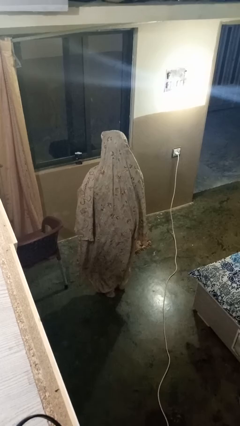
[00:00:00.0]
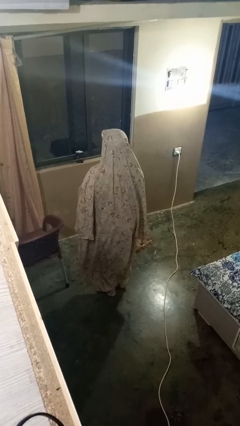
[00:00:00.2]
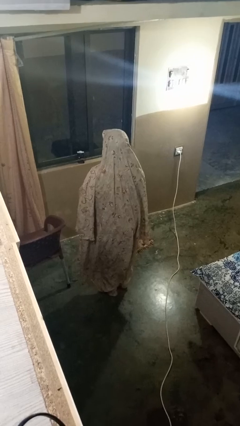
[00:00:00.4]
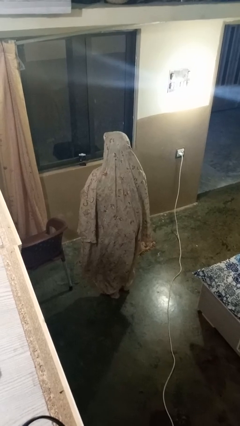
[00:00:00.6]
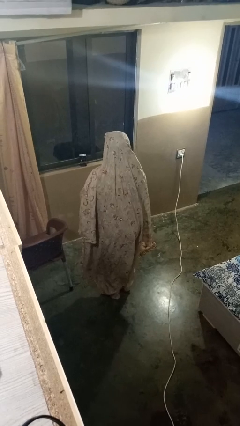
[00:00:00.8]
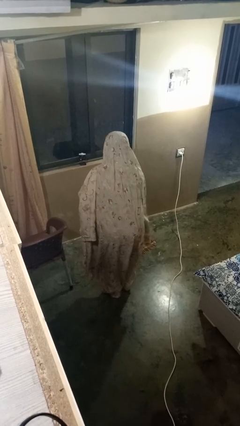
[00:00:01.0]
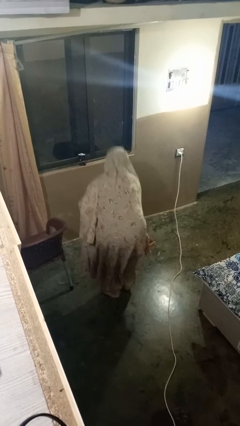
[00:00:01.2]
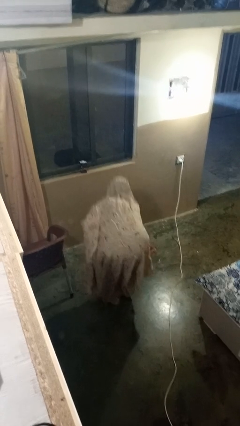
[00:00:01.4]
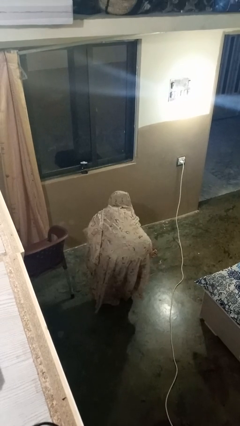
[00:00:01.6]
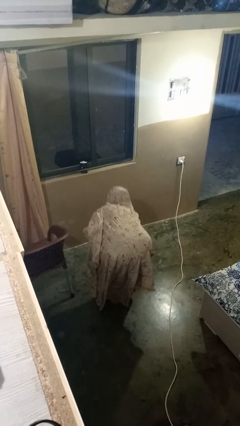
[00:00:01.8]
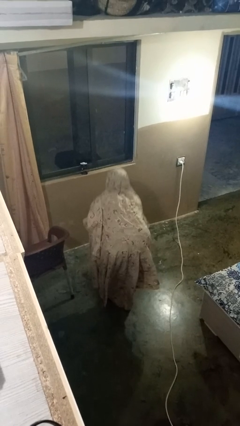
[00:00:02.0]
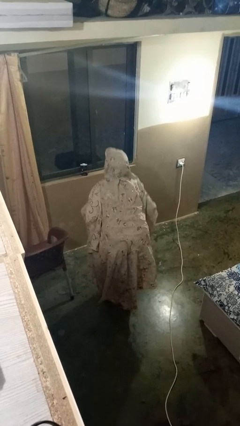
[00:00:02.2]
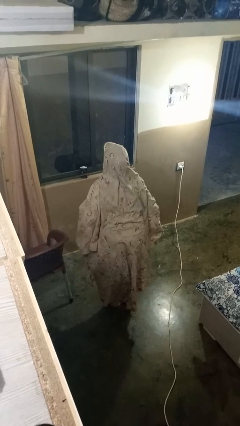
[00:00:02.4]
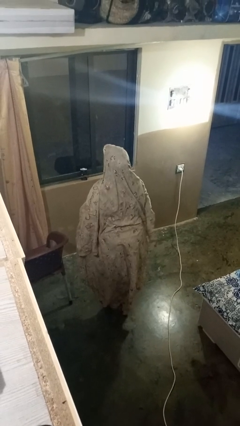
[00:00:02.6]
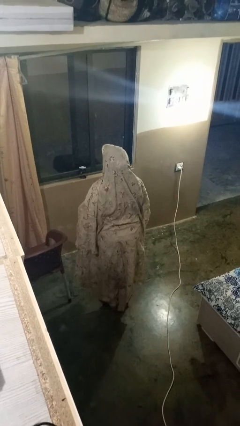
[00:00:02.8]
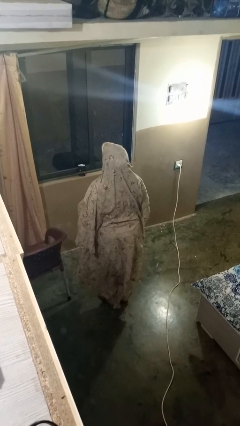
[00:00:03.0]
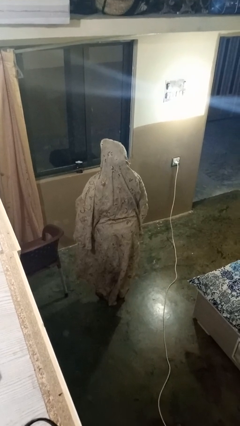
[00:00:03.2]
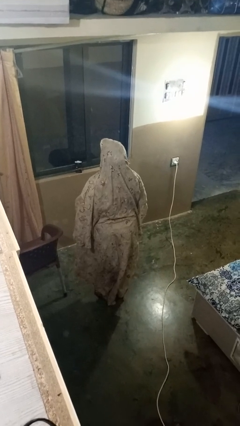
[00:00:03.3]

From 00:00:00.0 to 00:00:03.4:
person picks up object from floor

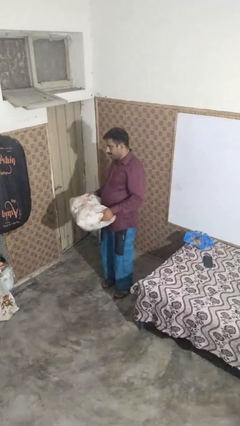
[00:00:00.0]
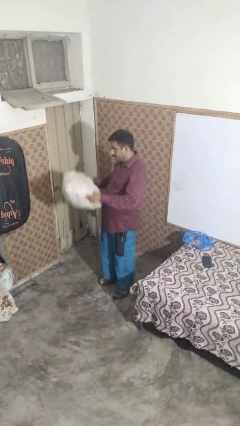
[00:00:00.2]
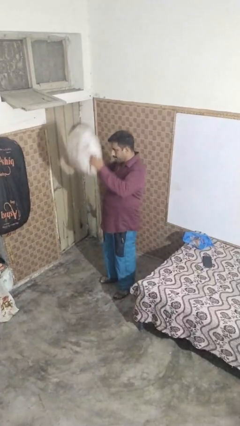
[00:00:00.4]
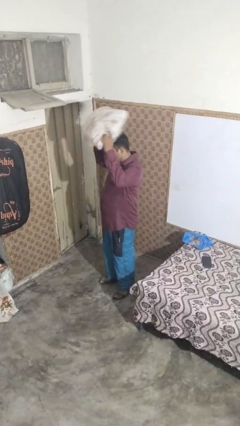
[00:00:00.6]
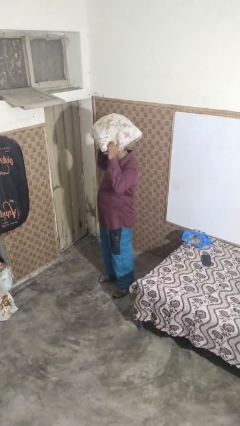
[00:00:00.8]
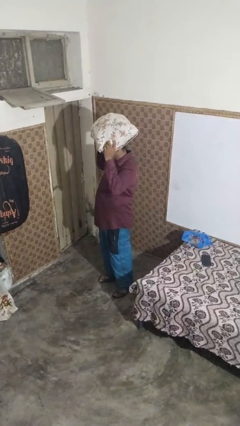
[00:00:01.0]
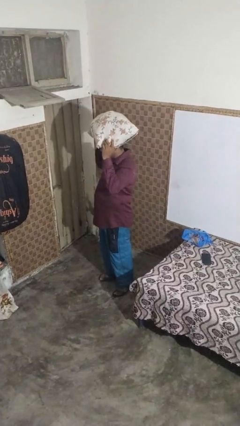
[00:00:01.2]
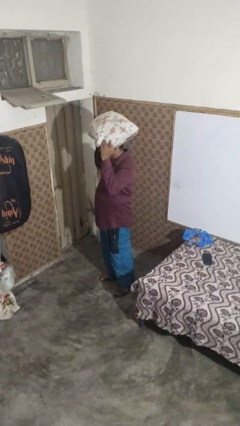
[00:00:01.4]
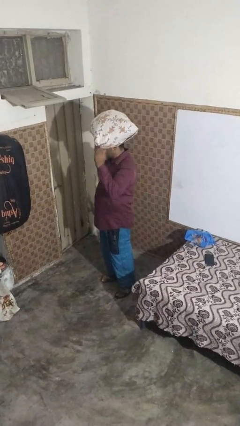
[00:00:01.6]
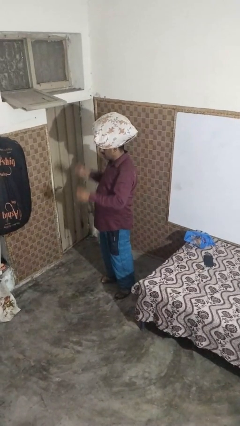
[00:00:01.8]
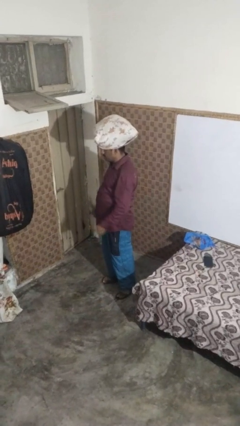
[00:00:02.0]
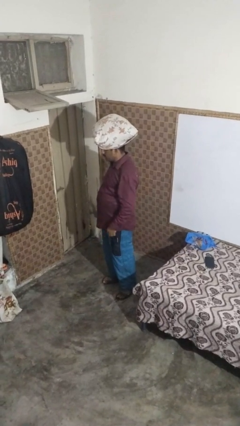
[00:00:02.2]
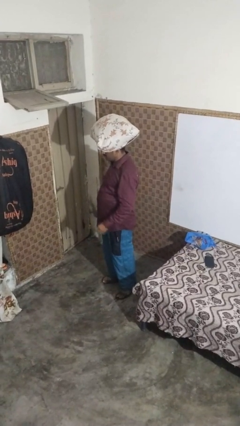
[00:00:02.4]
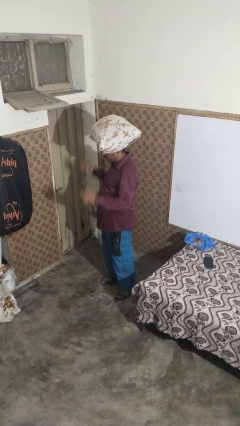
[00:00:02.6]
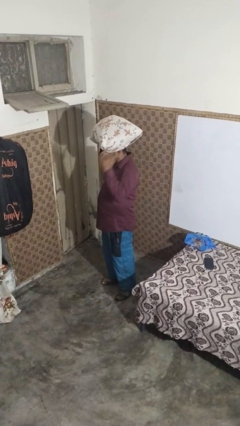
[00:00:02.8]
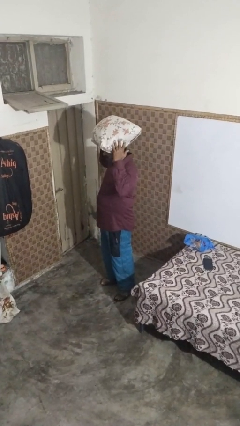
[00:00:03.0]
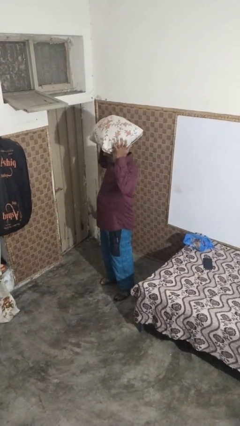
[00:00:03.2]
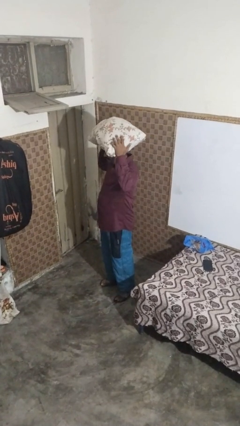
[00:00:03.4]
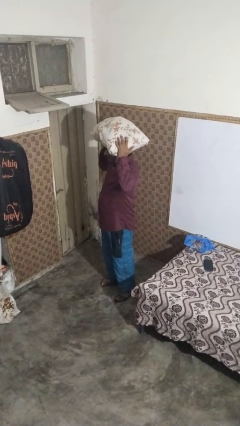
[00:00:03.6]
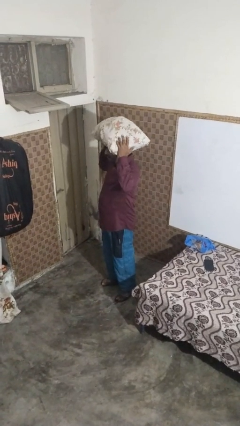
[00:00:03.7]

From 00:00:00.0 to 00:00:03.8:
person holds object above head

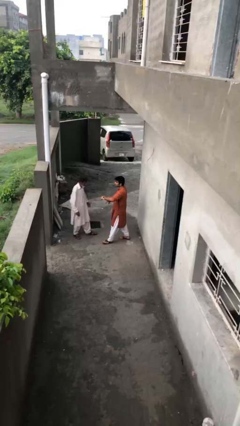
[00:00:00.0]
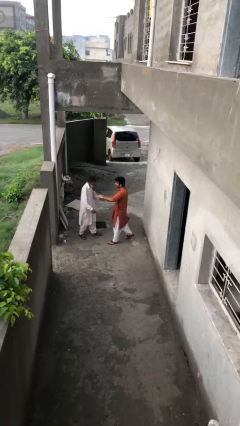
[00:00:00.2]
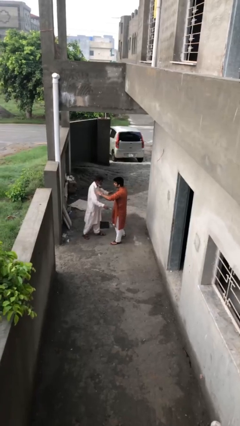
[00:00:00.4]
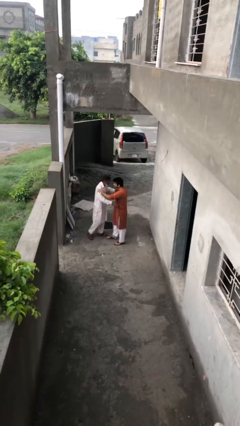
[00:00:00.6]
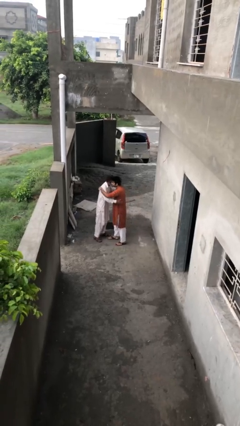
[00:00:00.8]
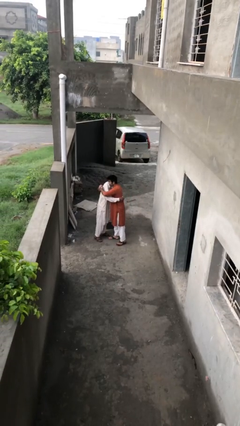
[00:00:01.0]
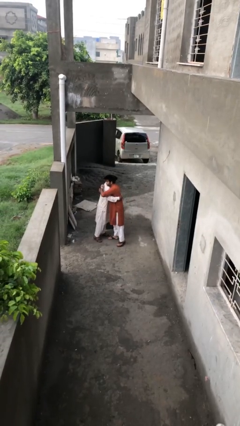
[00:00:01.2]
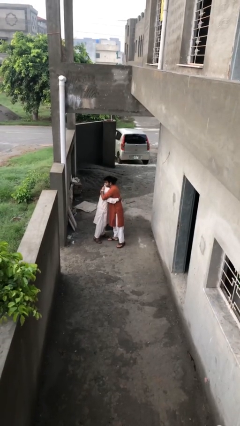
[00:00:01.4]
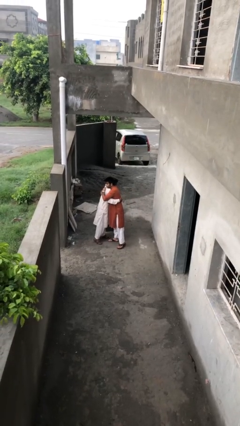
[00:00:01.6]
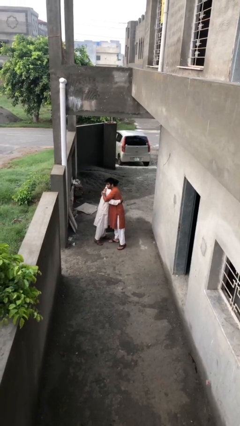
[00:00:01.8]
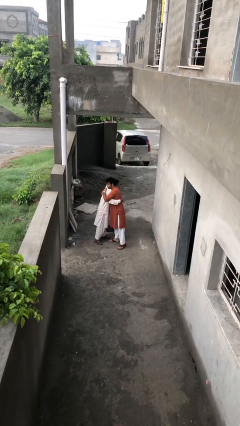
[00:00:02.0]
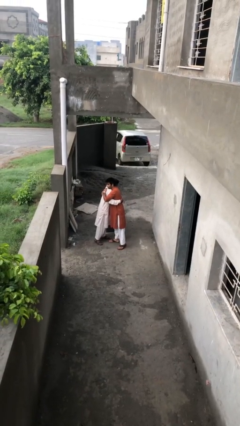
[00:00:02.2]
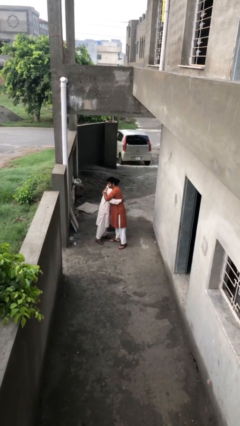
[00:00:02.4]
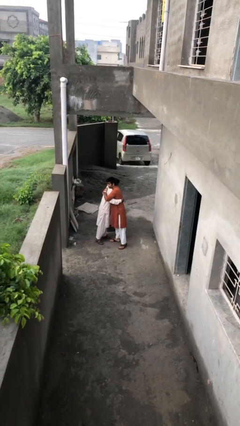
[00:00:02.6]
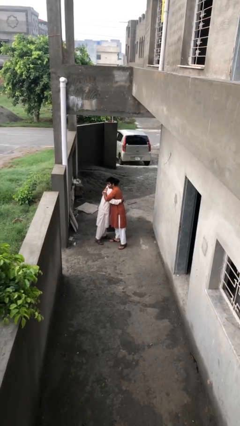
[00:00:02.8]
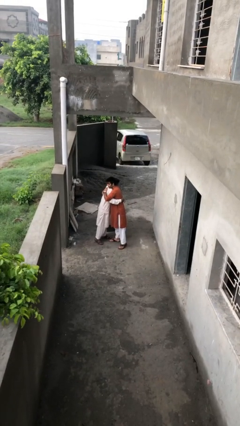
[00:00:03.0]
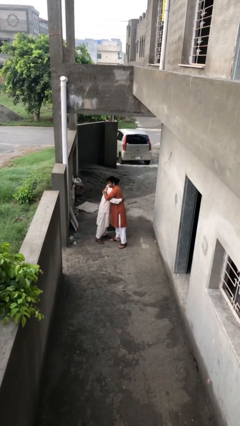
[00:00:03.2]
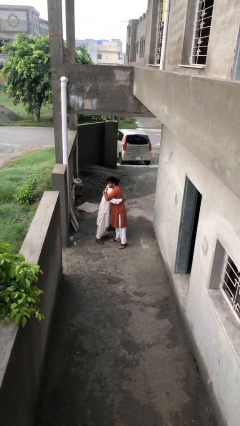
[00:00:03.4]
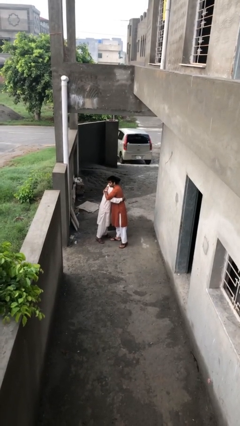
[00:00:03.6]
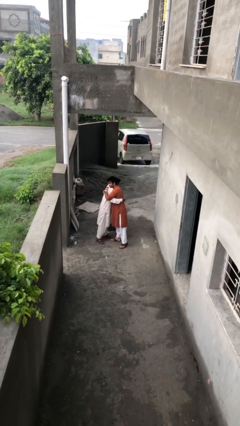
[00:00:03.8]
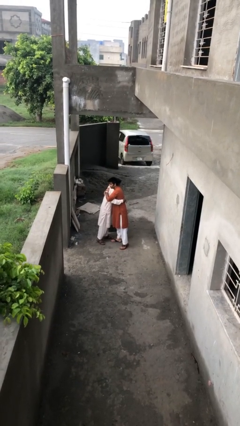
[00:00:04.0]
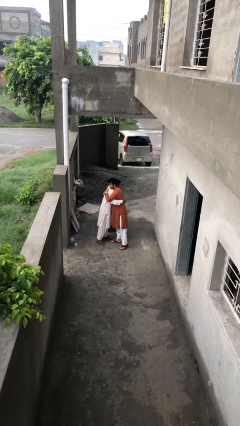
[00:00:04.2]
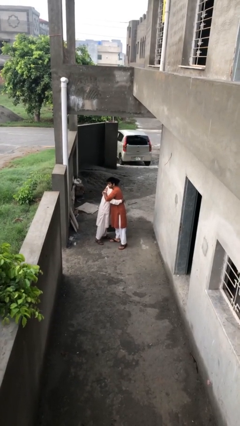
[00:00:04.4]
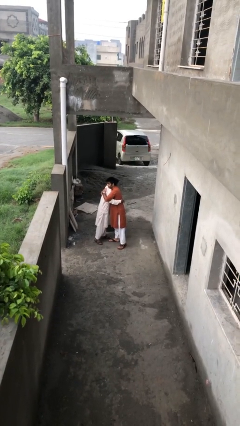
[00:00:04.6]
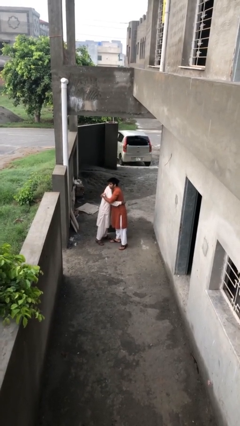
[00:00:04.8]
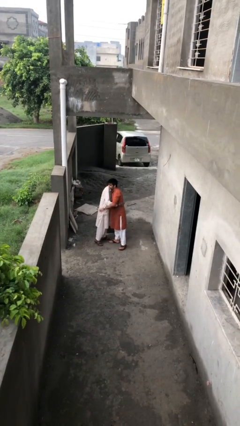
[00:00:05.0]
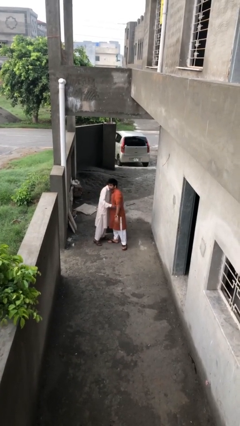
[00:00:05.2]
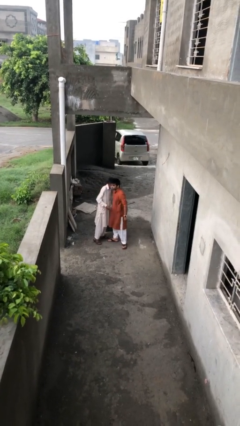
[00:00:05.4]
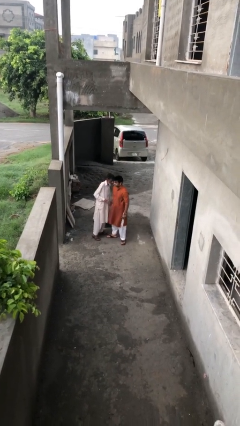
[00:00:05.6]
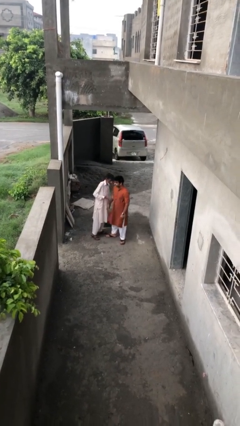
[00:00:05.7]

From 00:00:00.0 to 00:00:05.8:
person embraces person

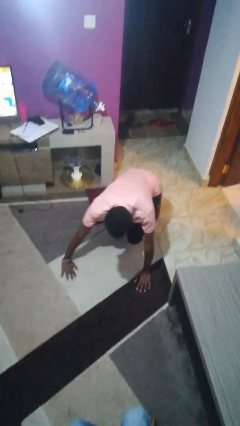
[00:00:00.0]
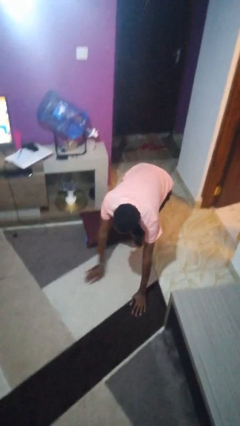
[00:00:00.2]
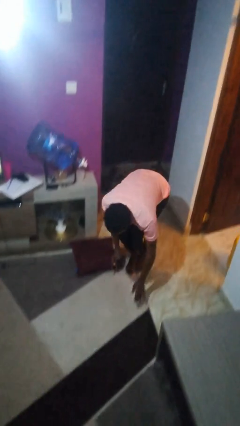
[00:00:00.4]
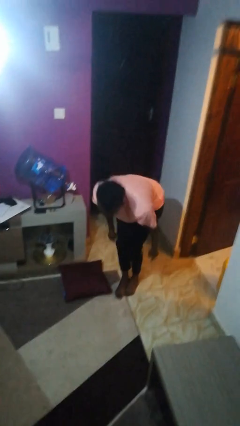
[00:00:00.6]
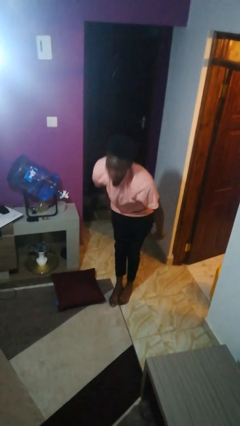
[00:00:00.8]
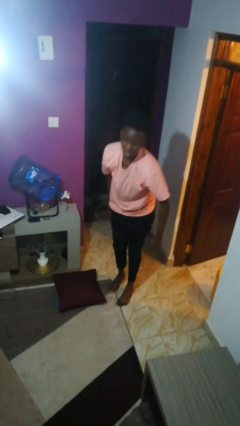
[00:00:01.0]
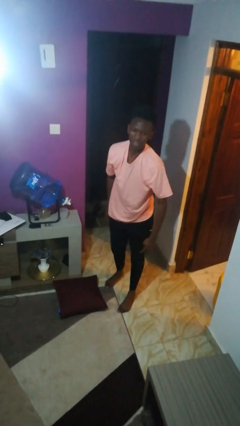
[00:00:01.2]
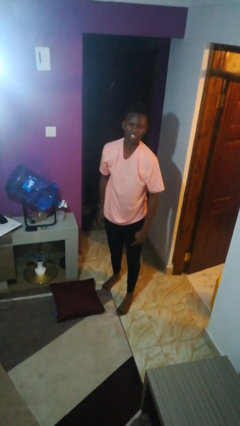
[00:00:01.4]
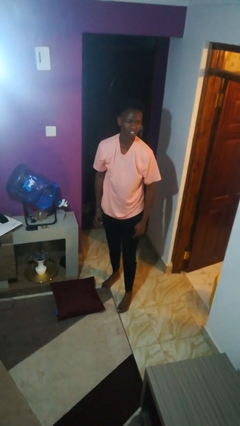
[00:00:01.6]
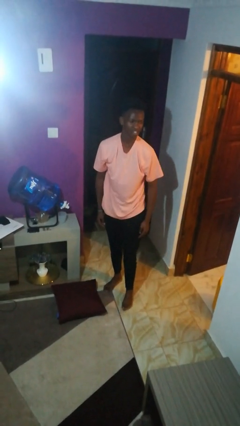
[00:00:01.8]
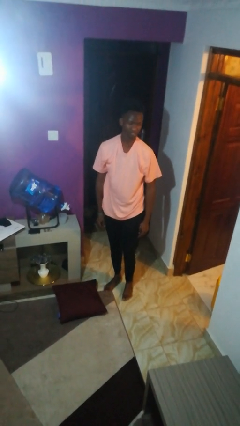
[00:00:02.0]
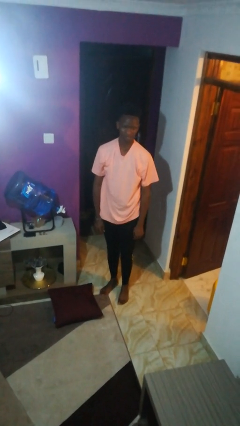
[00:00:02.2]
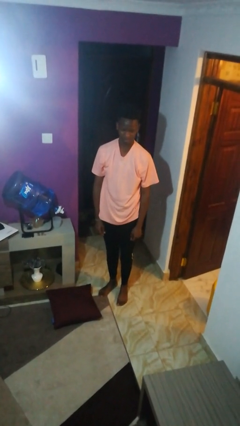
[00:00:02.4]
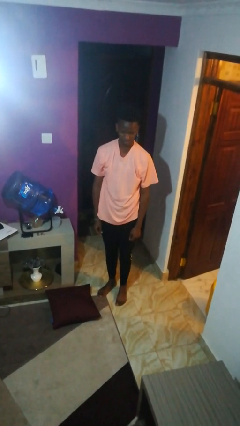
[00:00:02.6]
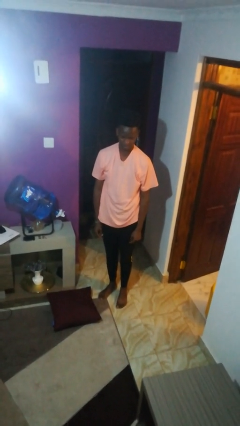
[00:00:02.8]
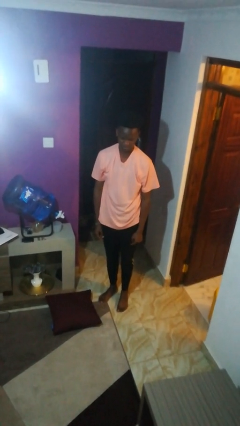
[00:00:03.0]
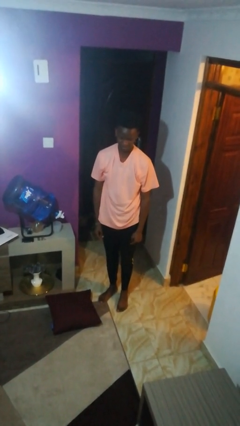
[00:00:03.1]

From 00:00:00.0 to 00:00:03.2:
person stands up from floor

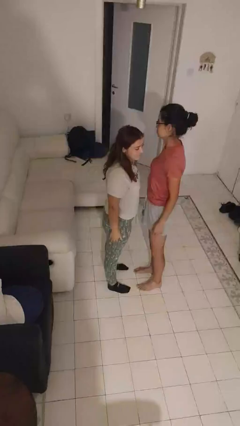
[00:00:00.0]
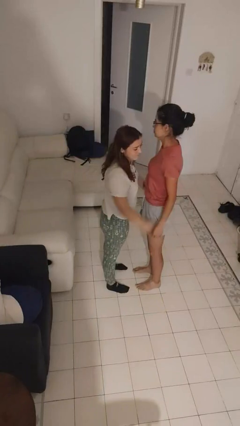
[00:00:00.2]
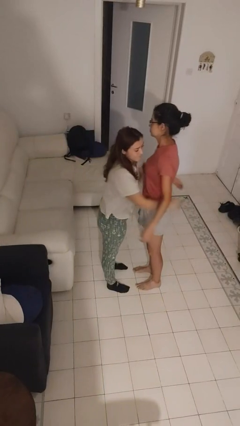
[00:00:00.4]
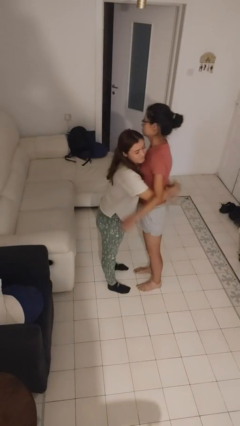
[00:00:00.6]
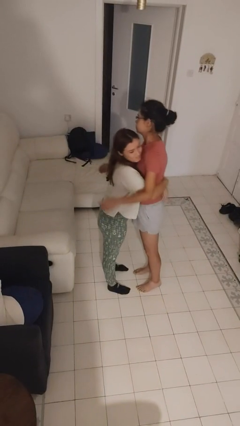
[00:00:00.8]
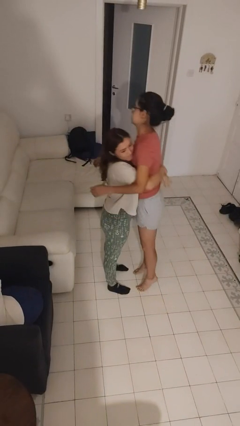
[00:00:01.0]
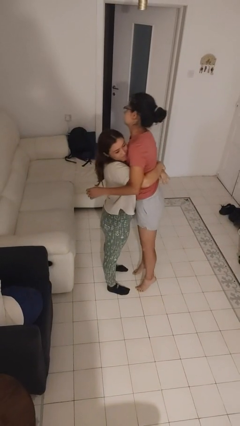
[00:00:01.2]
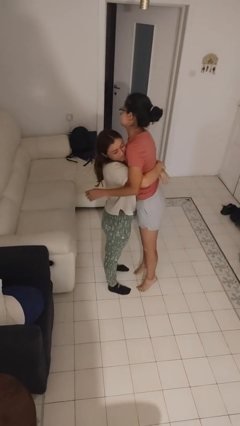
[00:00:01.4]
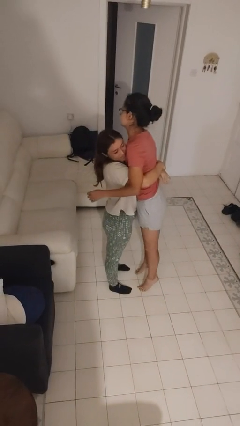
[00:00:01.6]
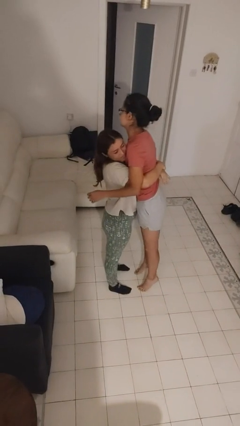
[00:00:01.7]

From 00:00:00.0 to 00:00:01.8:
person picks up person
